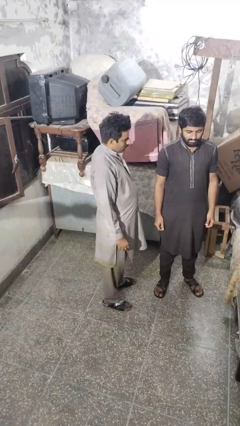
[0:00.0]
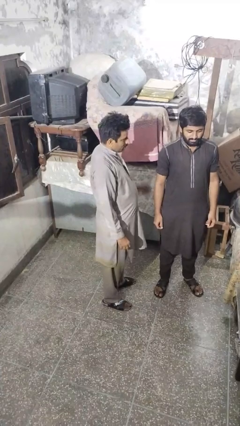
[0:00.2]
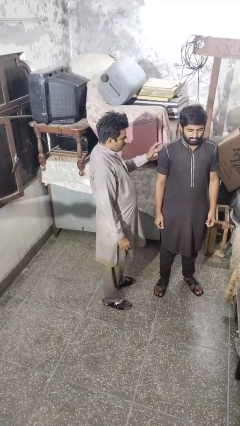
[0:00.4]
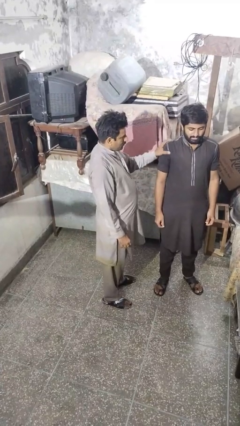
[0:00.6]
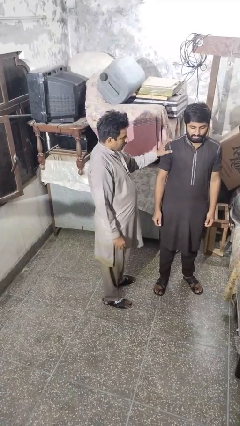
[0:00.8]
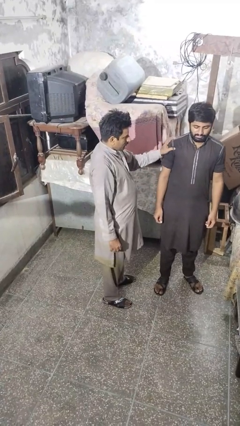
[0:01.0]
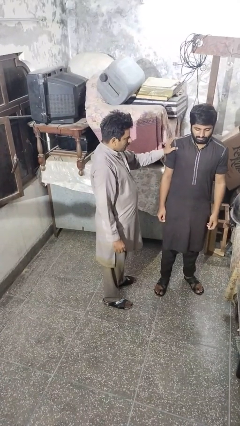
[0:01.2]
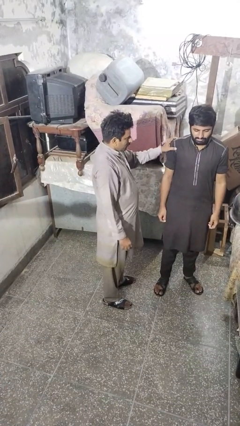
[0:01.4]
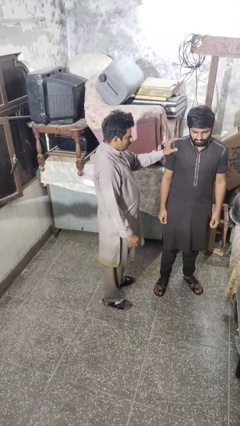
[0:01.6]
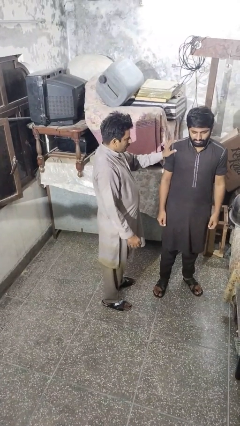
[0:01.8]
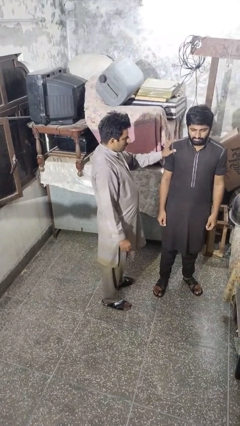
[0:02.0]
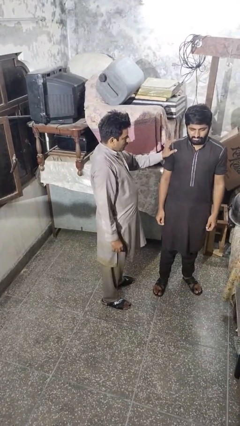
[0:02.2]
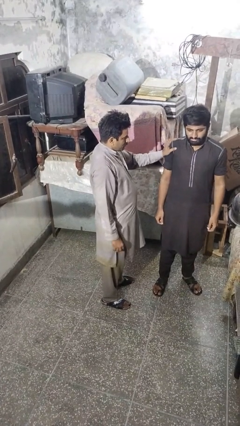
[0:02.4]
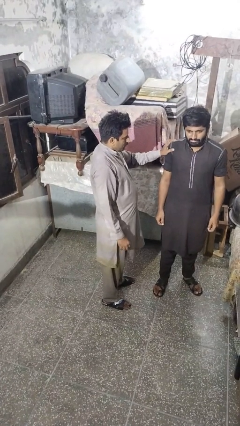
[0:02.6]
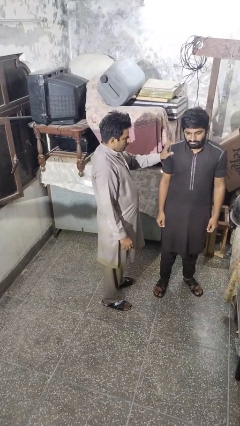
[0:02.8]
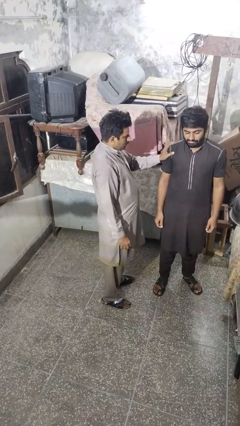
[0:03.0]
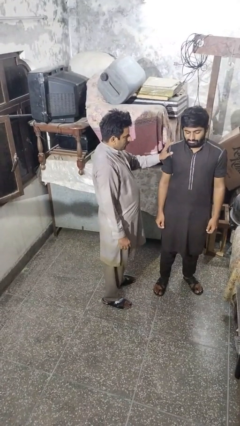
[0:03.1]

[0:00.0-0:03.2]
person grabs person by shoulder

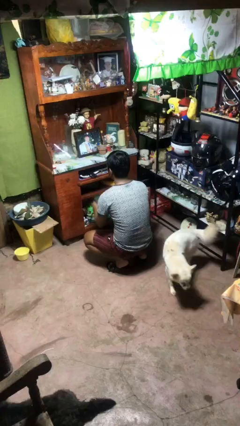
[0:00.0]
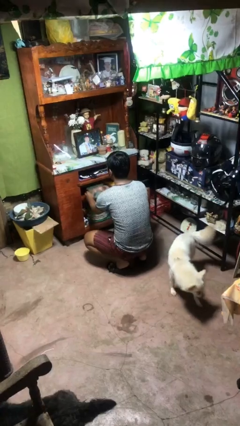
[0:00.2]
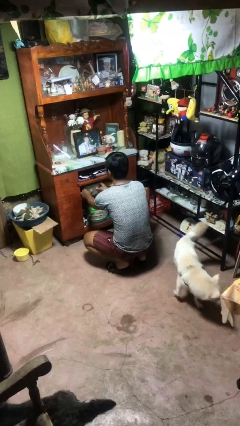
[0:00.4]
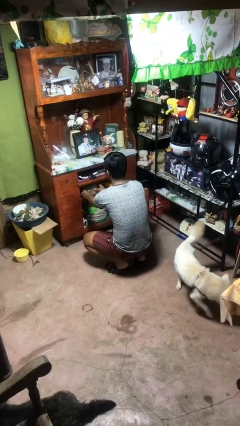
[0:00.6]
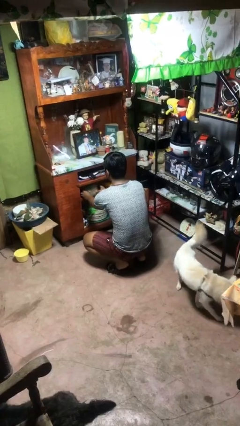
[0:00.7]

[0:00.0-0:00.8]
person puts down object into cabinet

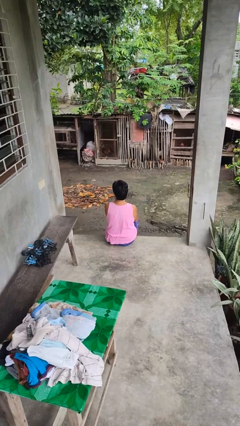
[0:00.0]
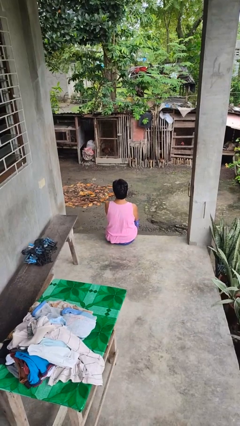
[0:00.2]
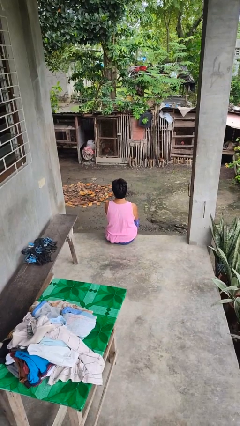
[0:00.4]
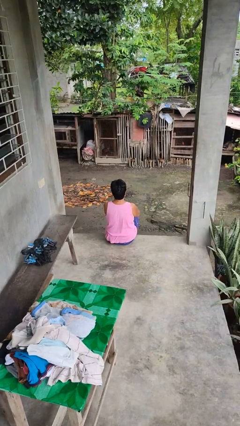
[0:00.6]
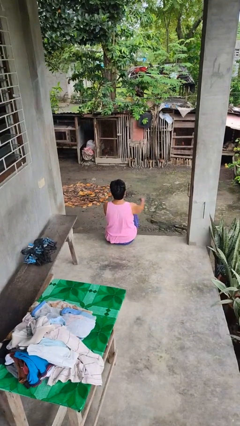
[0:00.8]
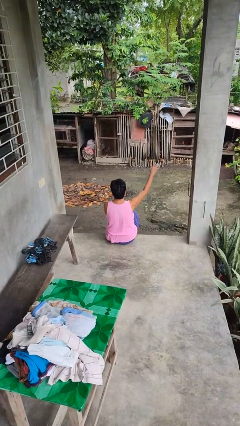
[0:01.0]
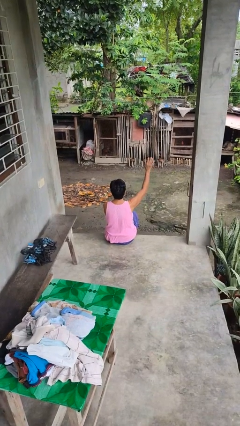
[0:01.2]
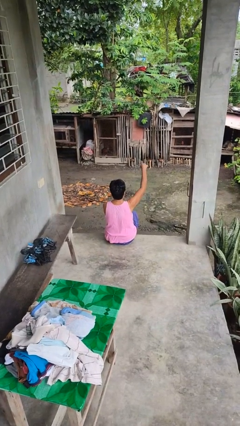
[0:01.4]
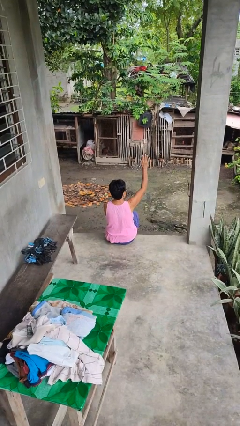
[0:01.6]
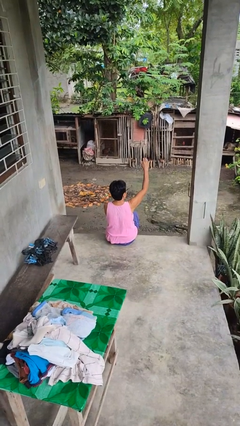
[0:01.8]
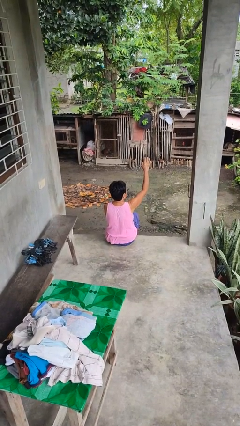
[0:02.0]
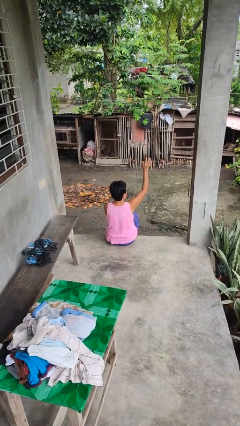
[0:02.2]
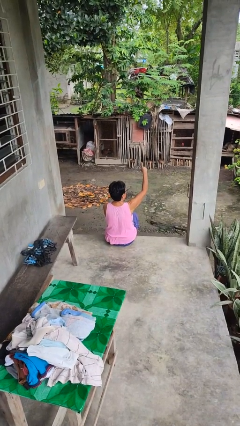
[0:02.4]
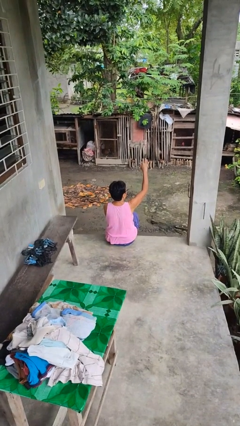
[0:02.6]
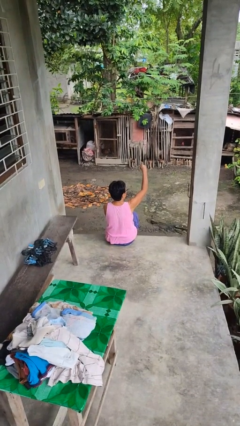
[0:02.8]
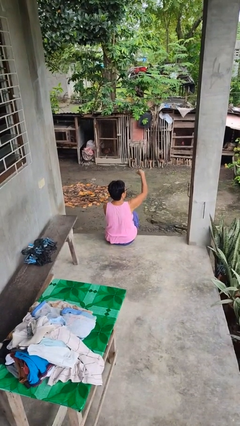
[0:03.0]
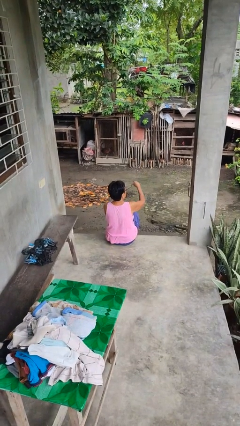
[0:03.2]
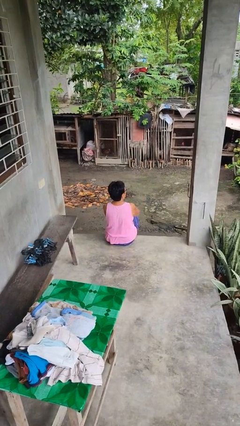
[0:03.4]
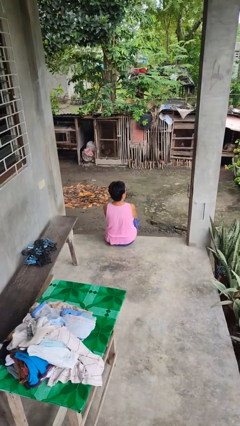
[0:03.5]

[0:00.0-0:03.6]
person gestures come here

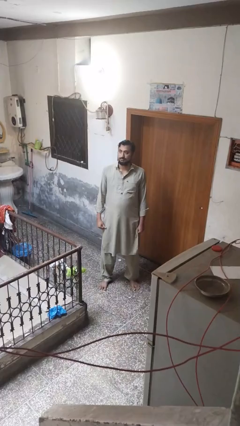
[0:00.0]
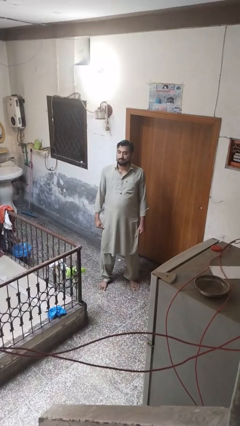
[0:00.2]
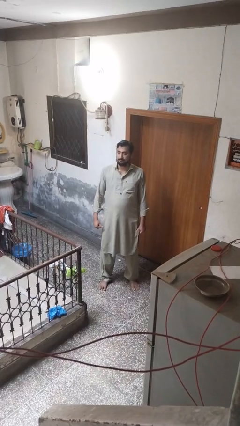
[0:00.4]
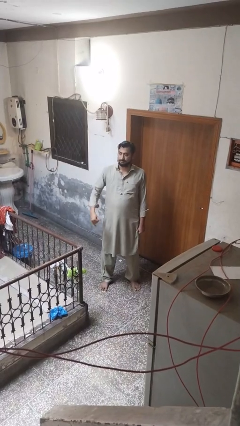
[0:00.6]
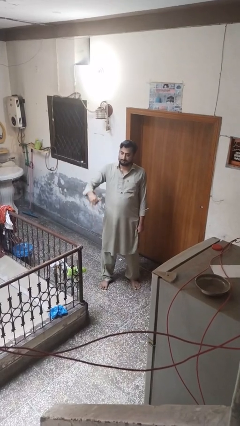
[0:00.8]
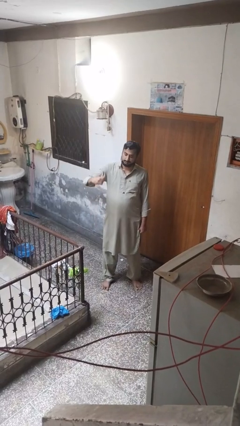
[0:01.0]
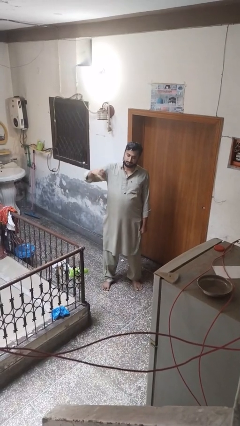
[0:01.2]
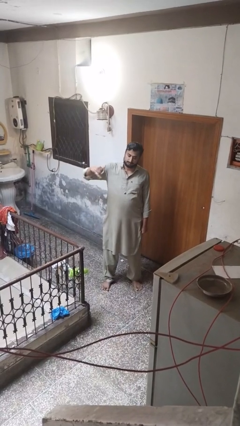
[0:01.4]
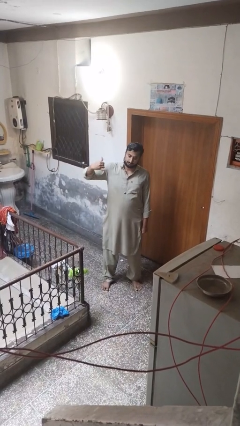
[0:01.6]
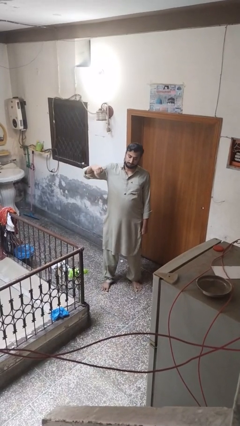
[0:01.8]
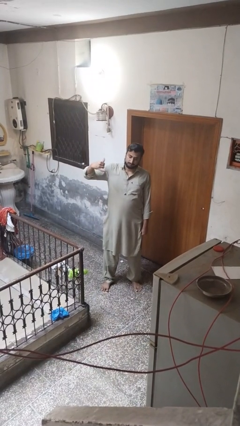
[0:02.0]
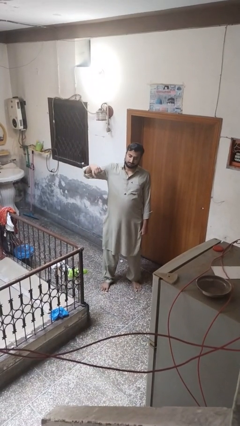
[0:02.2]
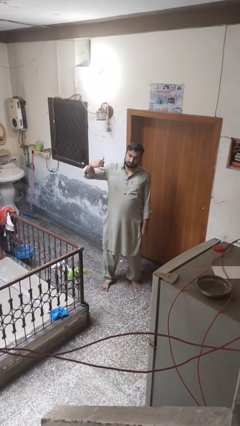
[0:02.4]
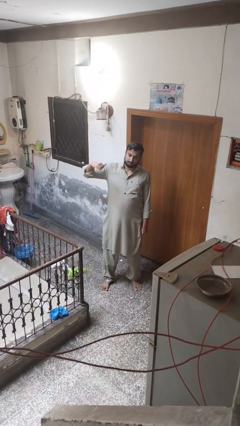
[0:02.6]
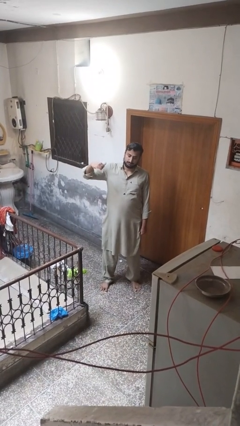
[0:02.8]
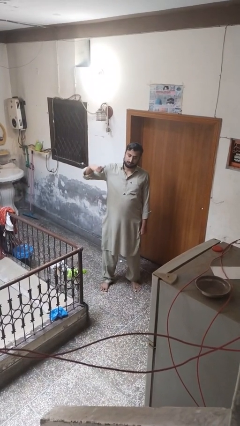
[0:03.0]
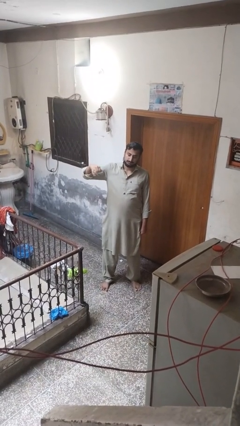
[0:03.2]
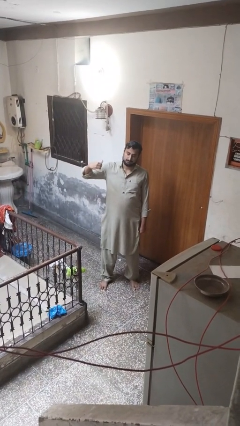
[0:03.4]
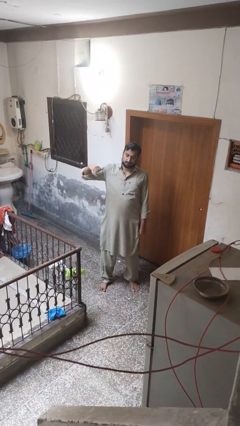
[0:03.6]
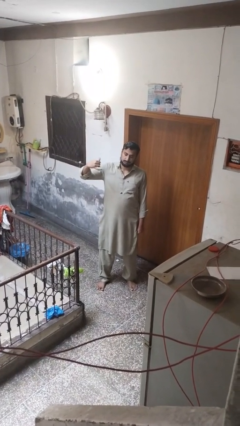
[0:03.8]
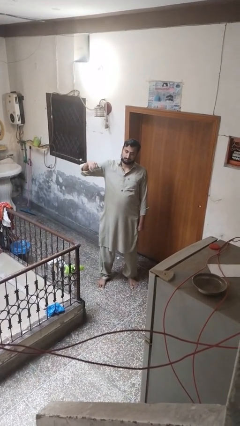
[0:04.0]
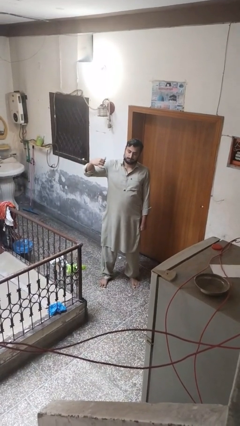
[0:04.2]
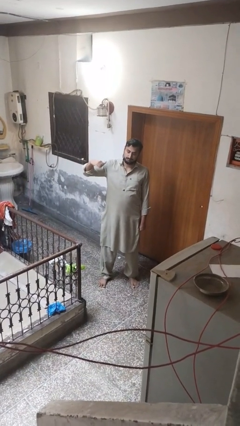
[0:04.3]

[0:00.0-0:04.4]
person gestures hang loose

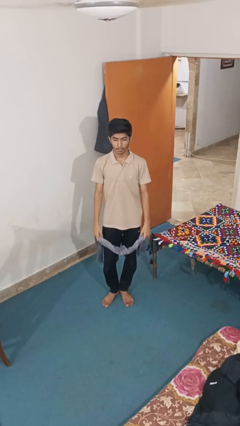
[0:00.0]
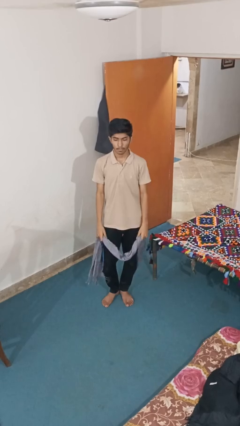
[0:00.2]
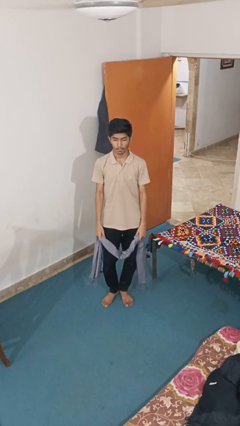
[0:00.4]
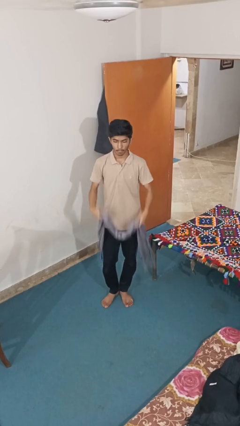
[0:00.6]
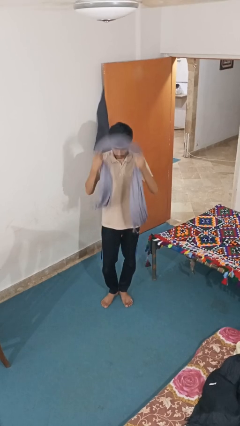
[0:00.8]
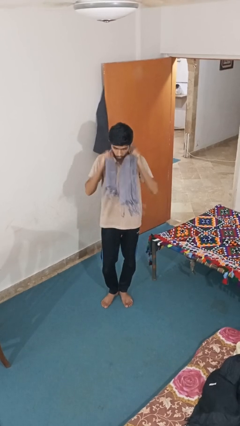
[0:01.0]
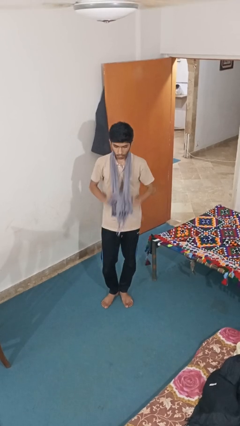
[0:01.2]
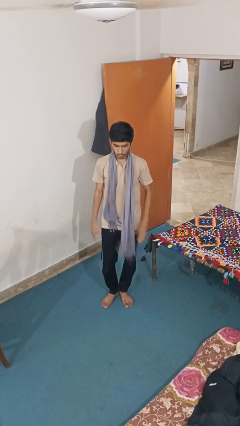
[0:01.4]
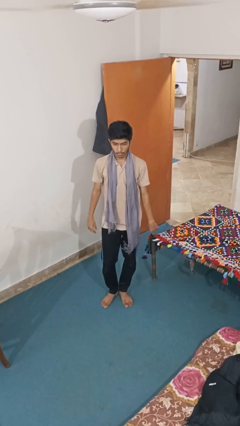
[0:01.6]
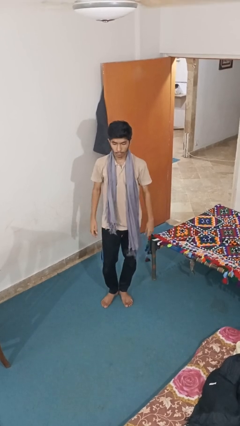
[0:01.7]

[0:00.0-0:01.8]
person puts on scarf

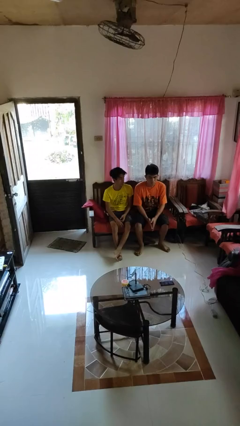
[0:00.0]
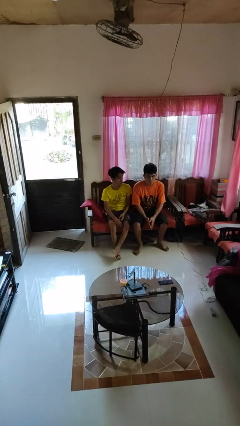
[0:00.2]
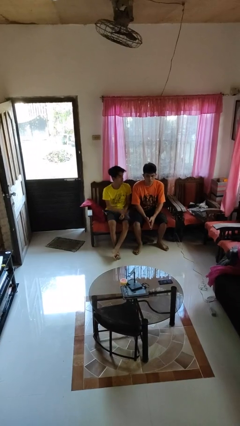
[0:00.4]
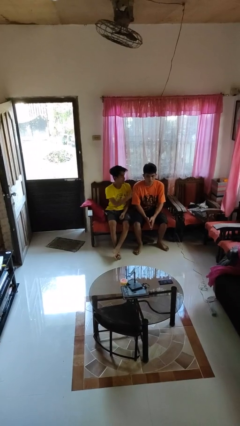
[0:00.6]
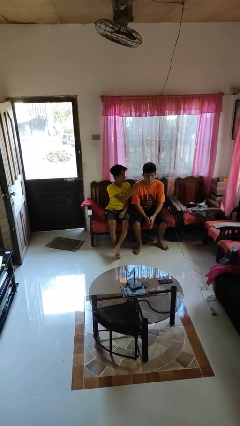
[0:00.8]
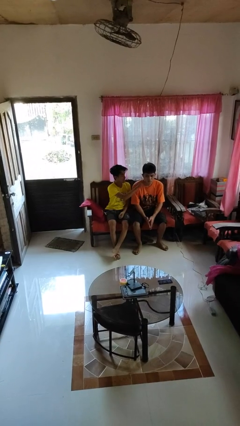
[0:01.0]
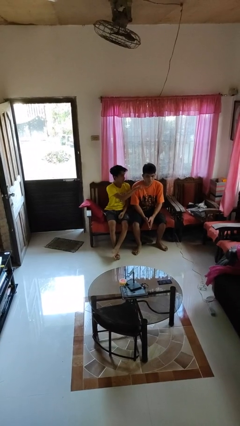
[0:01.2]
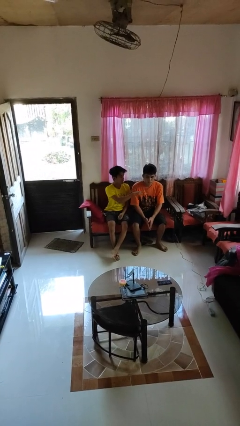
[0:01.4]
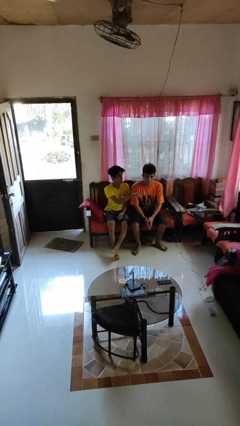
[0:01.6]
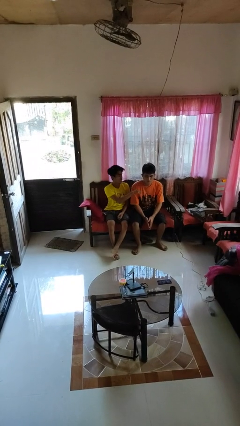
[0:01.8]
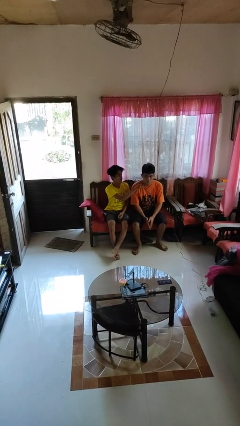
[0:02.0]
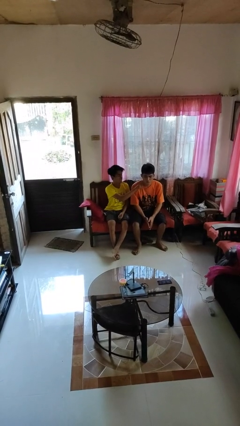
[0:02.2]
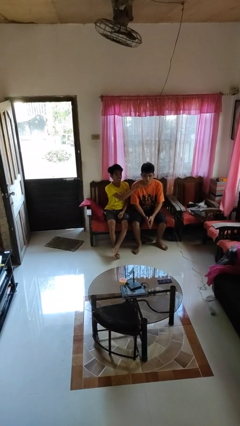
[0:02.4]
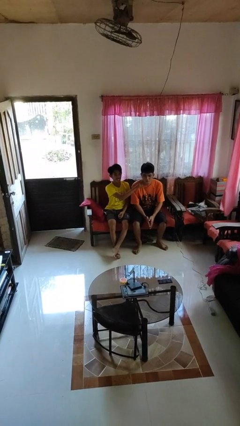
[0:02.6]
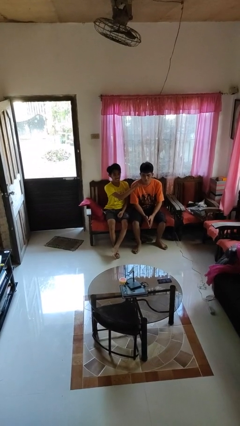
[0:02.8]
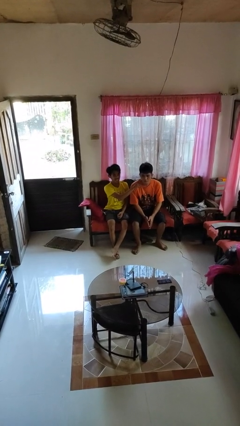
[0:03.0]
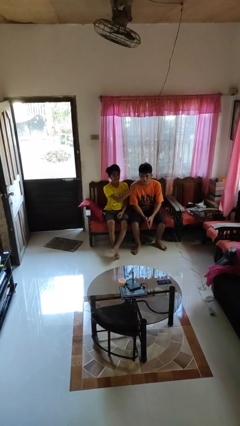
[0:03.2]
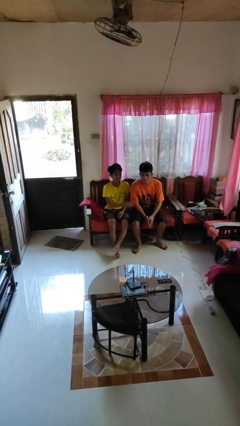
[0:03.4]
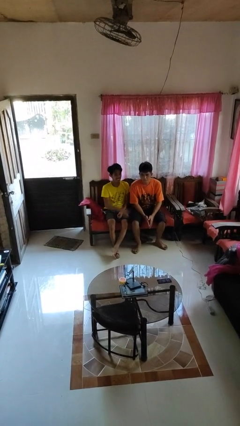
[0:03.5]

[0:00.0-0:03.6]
person touches face of person
